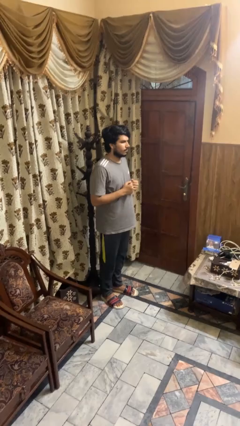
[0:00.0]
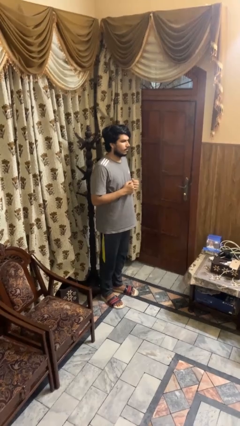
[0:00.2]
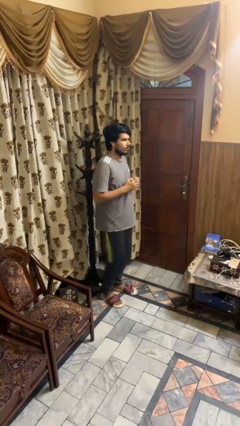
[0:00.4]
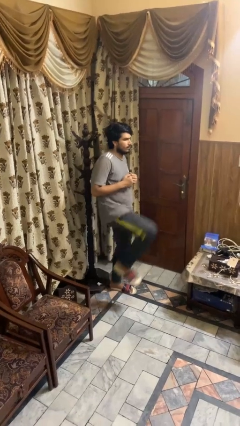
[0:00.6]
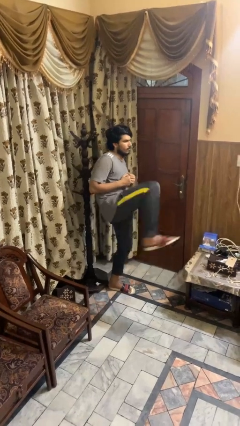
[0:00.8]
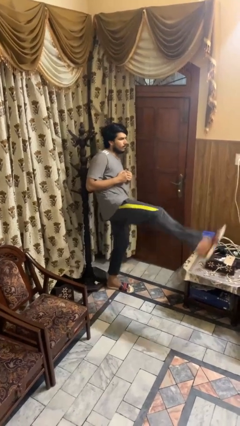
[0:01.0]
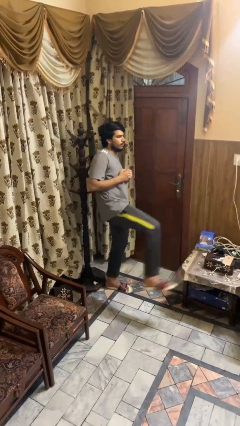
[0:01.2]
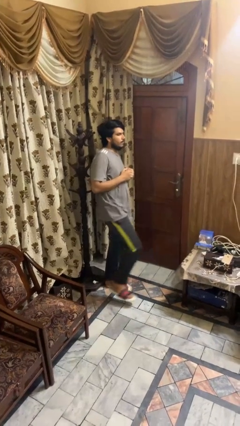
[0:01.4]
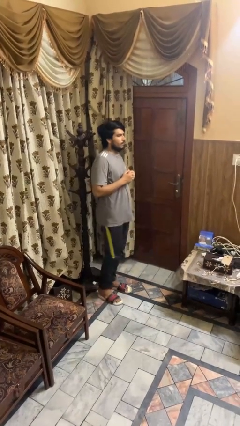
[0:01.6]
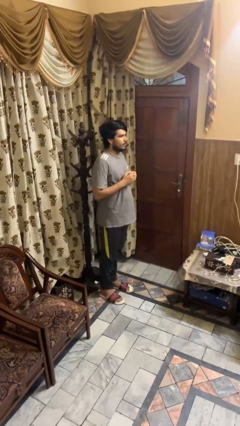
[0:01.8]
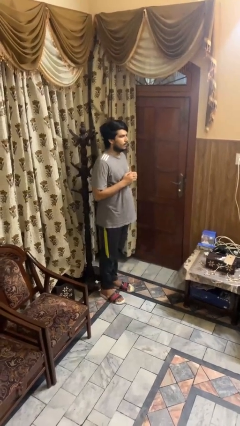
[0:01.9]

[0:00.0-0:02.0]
person karate kicks

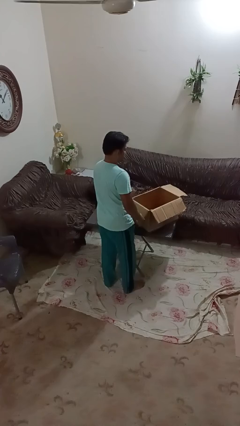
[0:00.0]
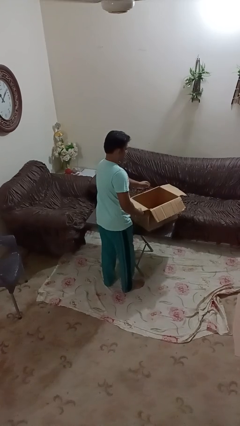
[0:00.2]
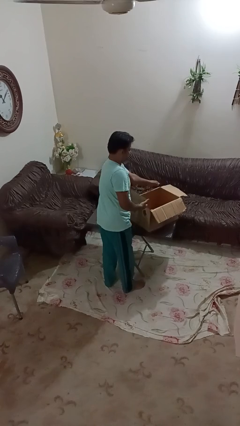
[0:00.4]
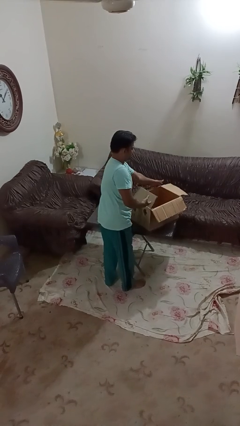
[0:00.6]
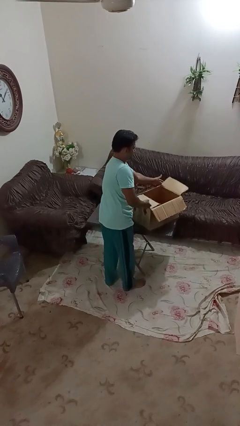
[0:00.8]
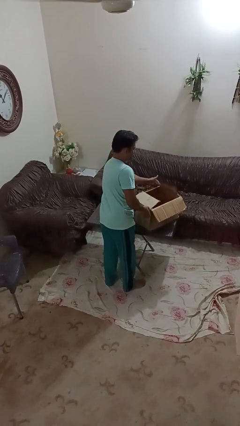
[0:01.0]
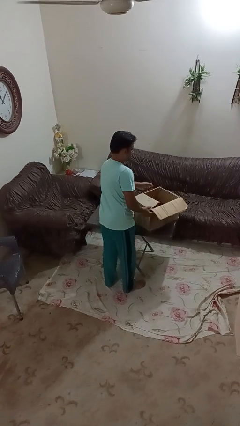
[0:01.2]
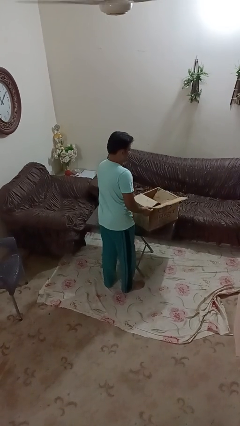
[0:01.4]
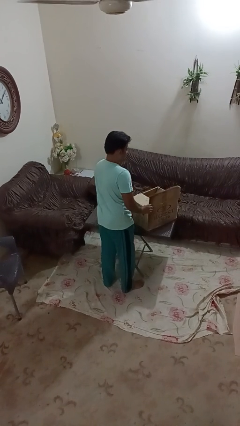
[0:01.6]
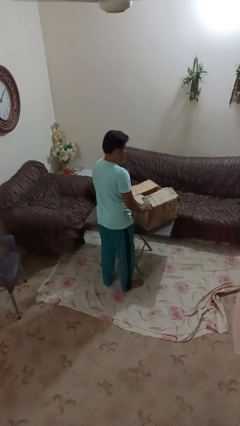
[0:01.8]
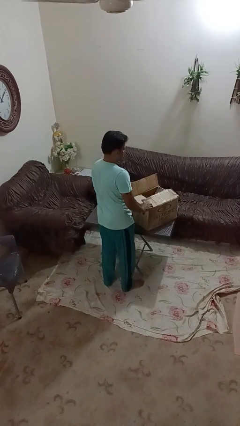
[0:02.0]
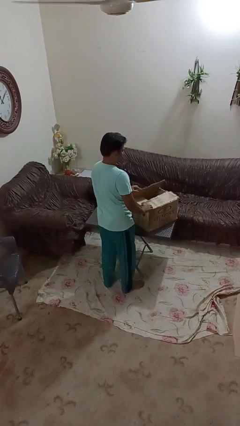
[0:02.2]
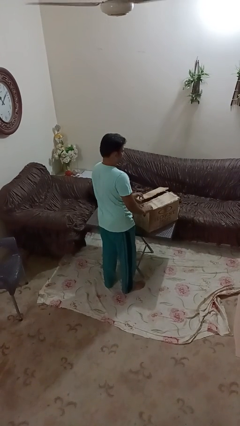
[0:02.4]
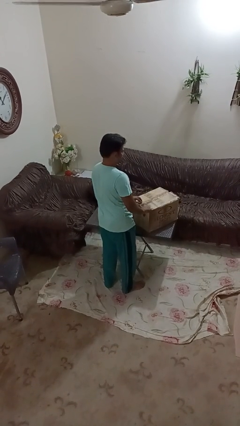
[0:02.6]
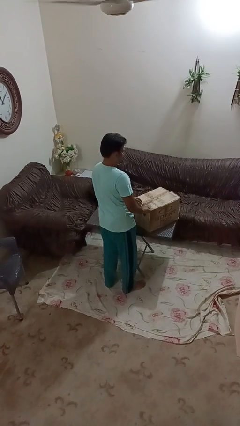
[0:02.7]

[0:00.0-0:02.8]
person closes box

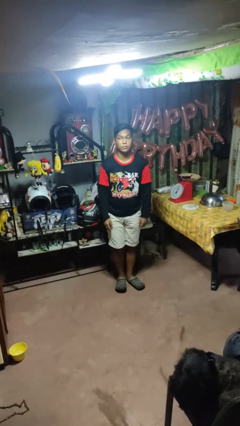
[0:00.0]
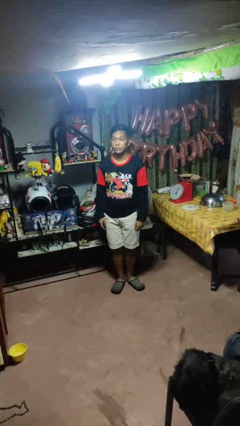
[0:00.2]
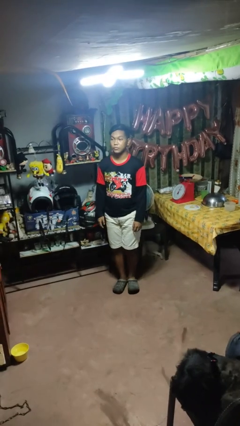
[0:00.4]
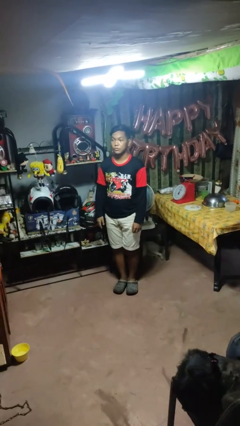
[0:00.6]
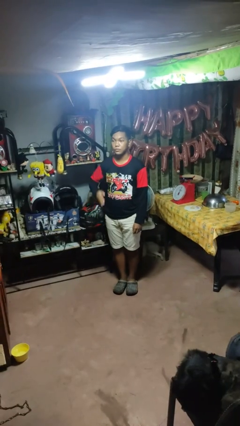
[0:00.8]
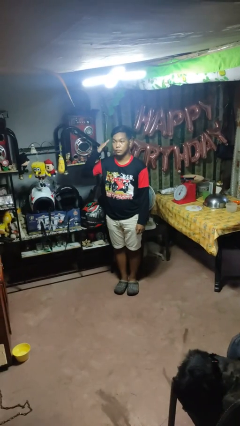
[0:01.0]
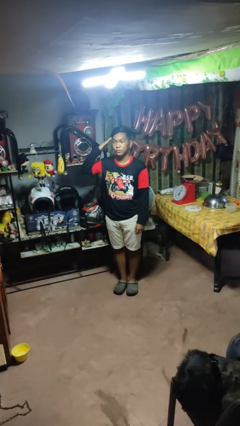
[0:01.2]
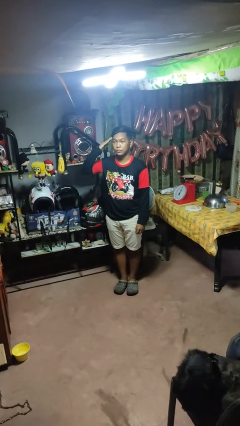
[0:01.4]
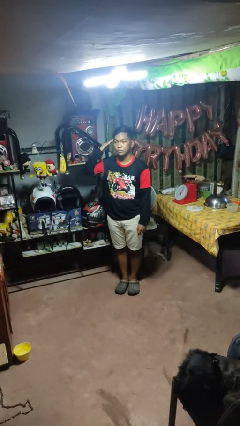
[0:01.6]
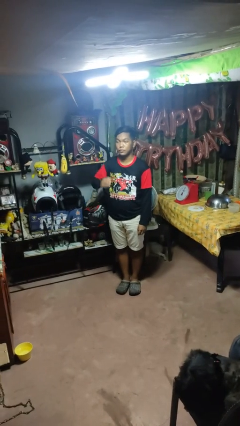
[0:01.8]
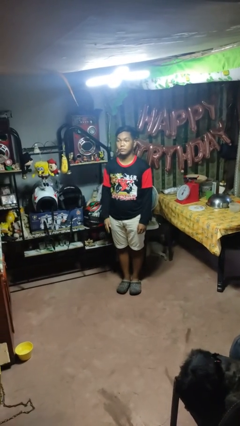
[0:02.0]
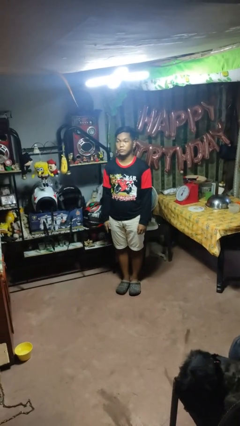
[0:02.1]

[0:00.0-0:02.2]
person salutes

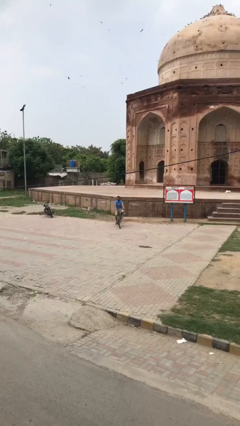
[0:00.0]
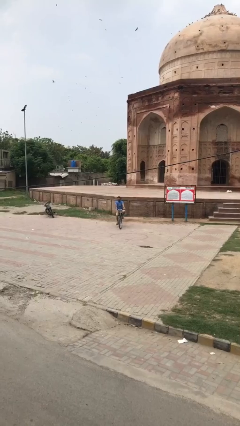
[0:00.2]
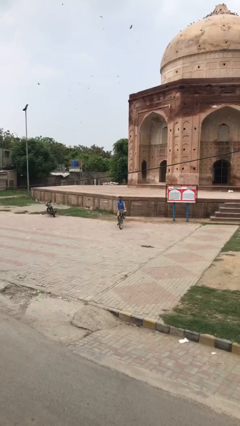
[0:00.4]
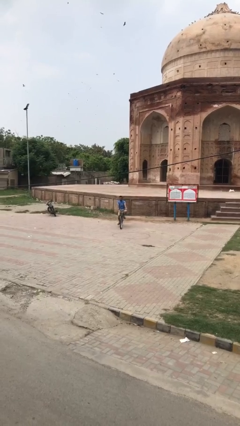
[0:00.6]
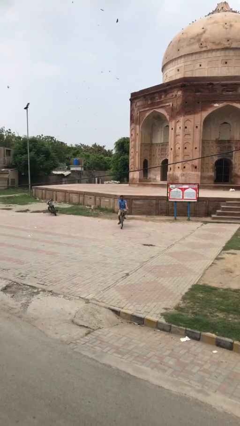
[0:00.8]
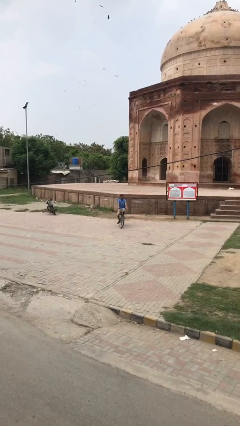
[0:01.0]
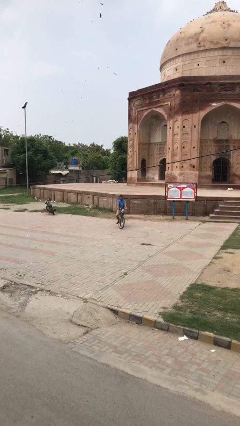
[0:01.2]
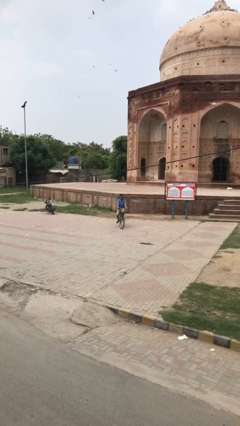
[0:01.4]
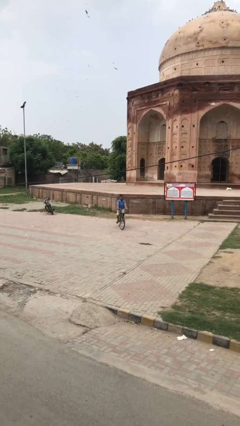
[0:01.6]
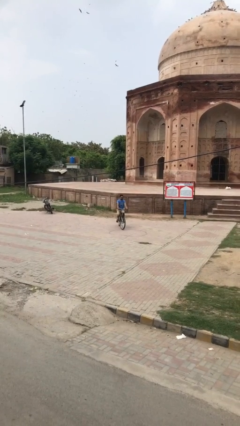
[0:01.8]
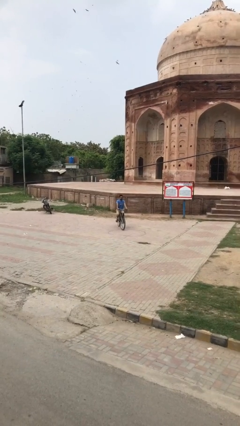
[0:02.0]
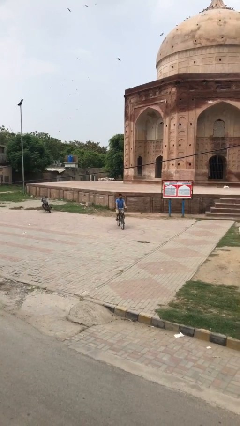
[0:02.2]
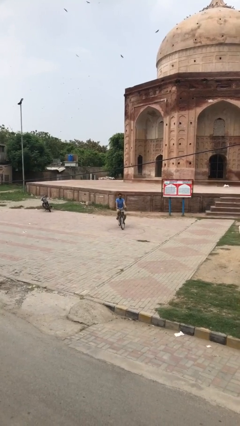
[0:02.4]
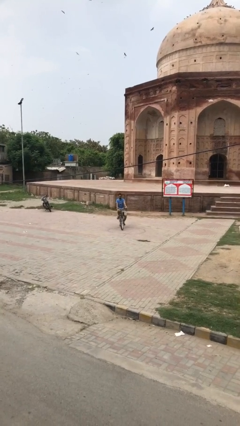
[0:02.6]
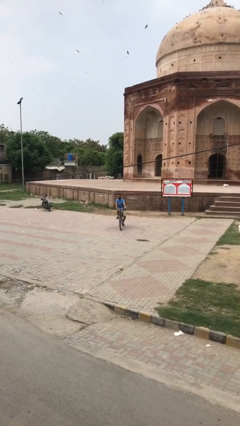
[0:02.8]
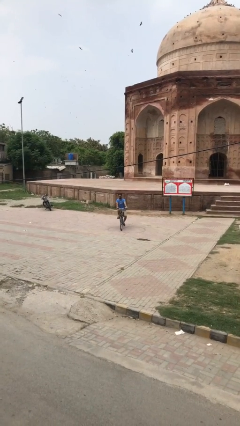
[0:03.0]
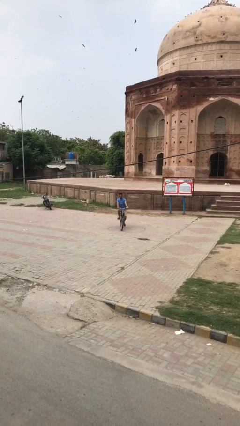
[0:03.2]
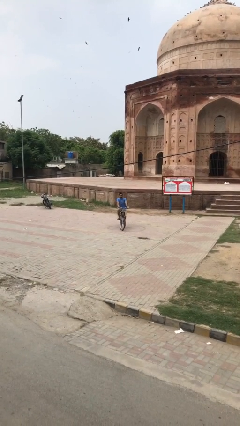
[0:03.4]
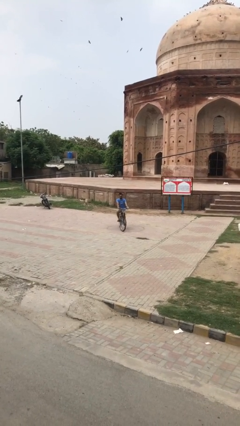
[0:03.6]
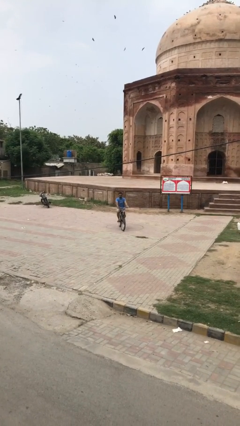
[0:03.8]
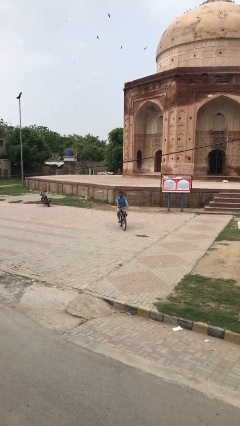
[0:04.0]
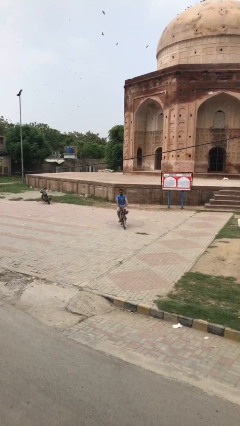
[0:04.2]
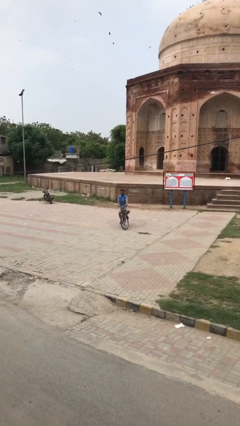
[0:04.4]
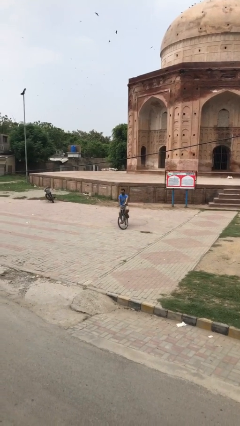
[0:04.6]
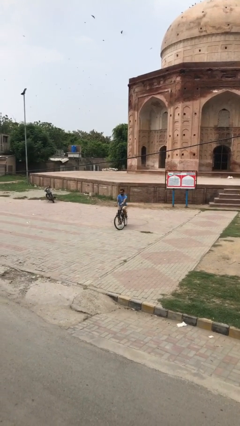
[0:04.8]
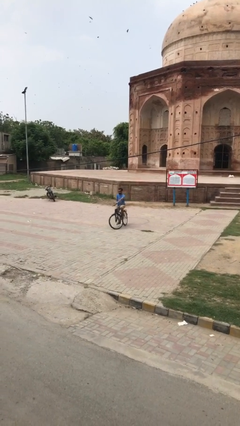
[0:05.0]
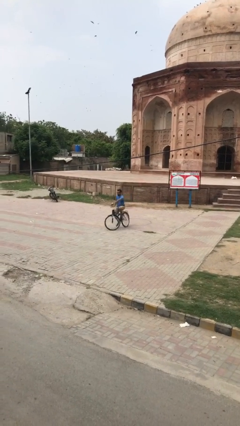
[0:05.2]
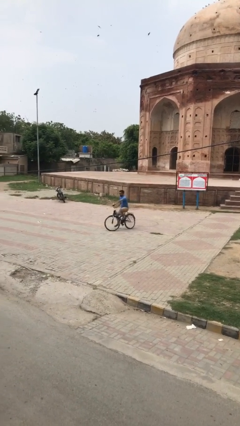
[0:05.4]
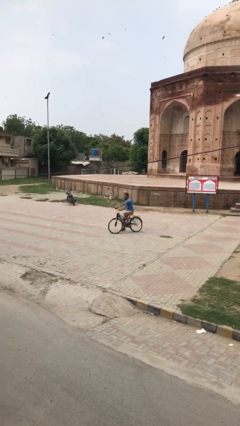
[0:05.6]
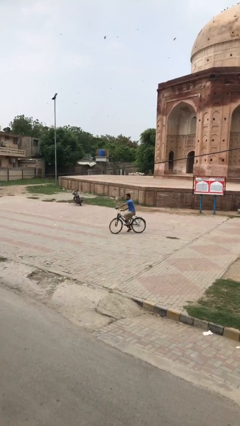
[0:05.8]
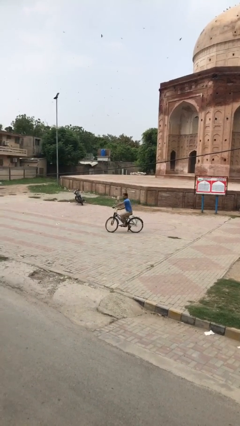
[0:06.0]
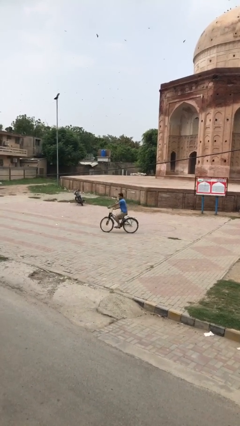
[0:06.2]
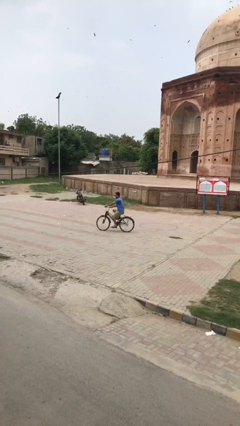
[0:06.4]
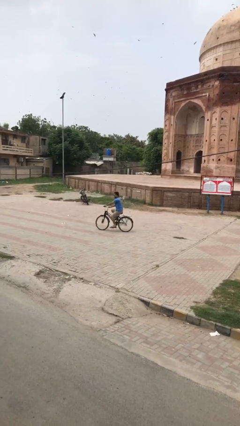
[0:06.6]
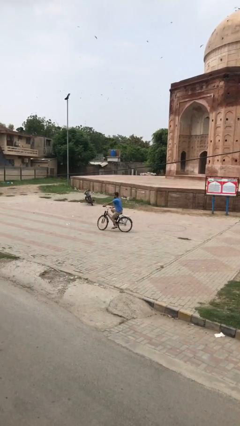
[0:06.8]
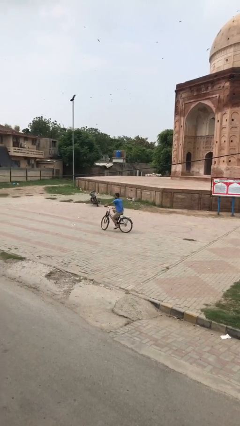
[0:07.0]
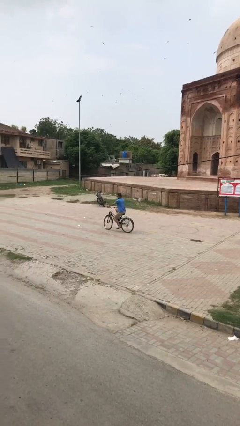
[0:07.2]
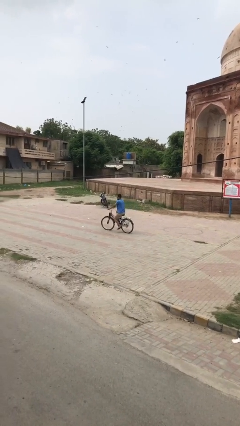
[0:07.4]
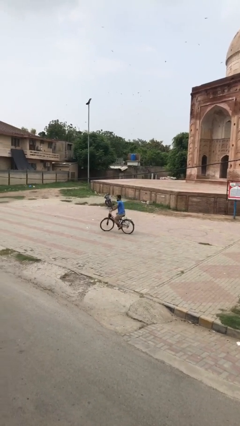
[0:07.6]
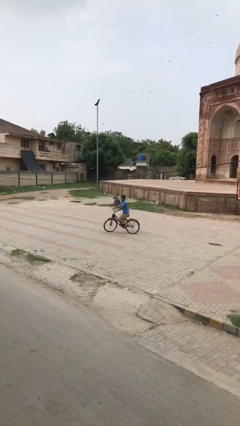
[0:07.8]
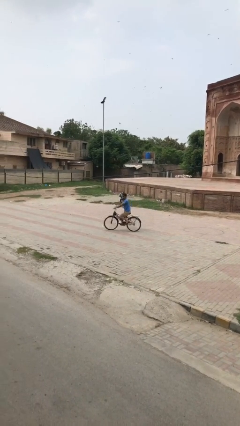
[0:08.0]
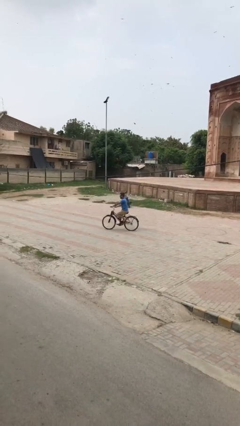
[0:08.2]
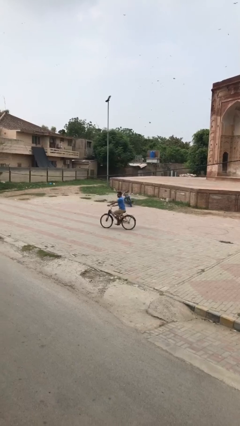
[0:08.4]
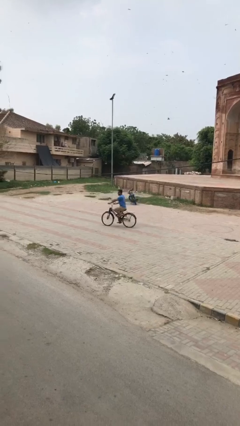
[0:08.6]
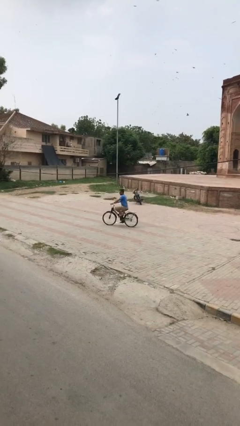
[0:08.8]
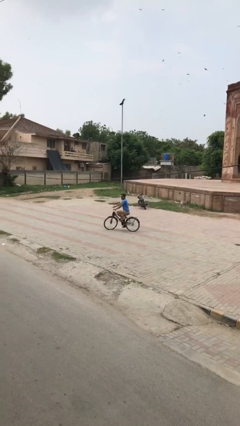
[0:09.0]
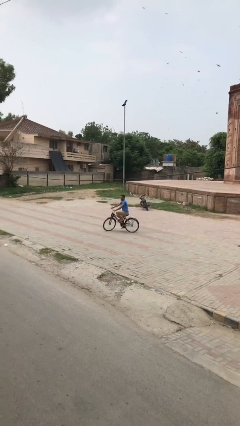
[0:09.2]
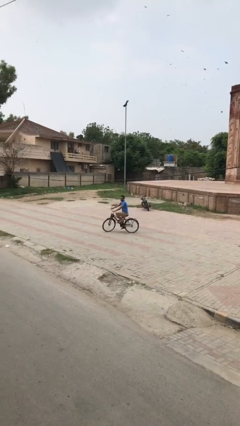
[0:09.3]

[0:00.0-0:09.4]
person rides bicycle

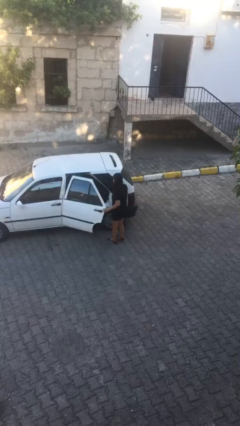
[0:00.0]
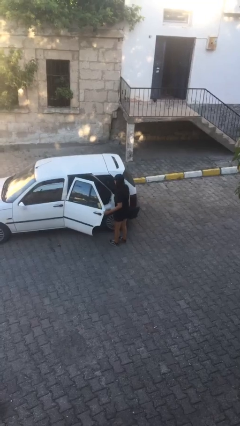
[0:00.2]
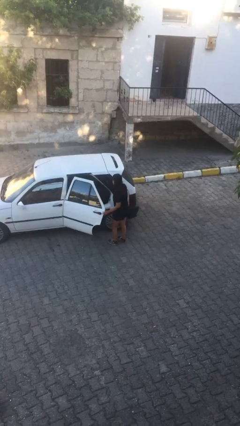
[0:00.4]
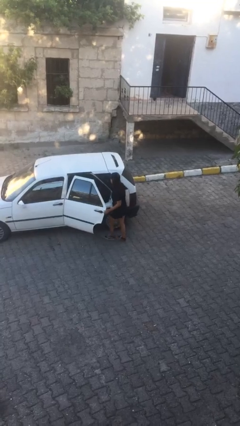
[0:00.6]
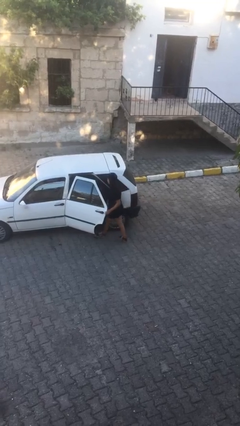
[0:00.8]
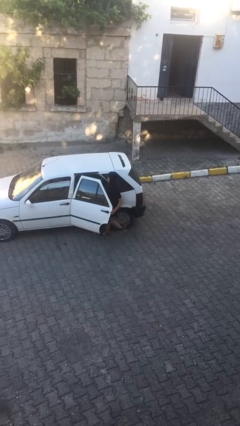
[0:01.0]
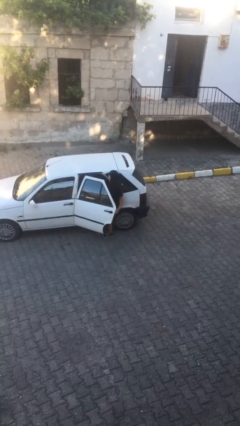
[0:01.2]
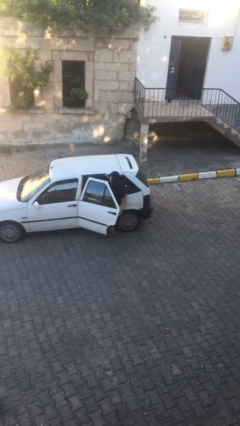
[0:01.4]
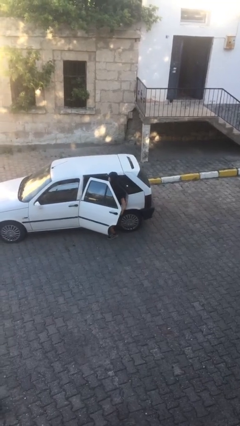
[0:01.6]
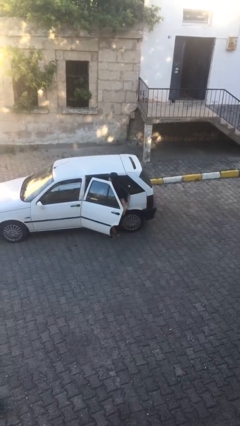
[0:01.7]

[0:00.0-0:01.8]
person enters car
